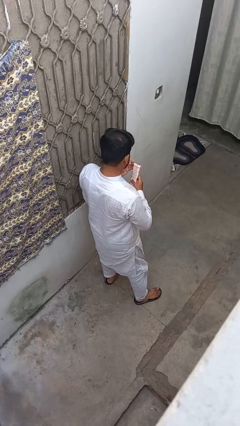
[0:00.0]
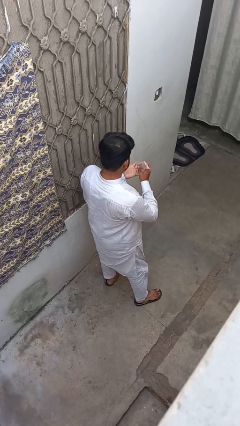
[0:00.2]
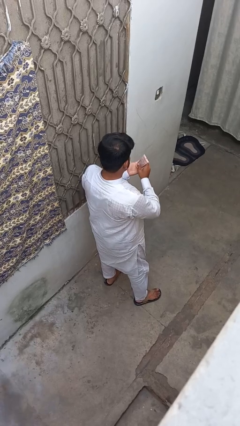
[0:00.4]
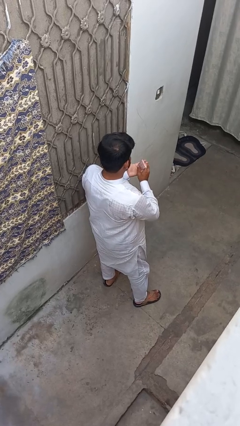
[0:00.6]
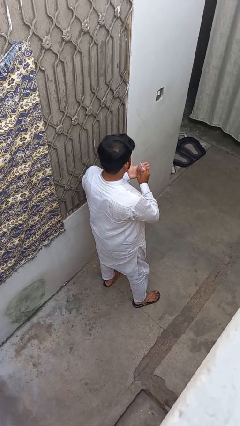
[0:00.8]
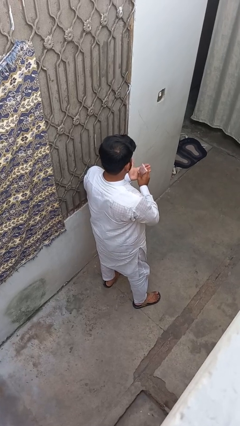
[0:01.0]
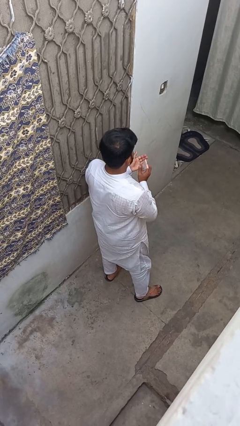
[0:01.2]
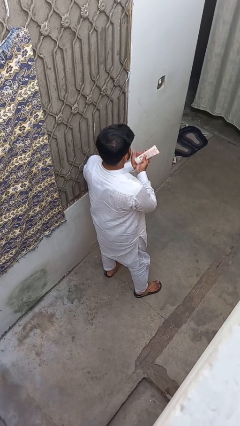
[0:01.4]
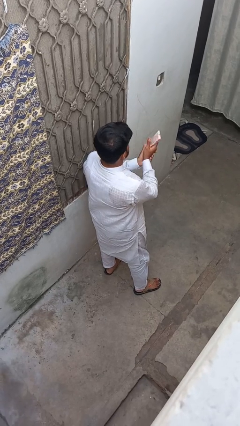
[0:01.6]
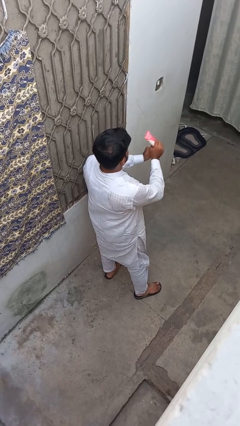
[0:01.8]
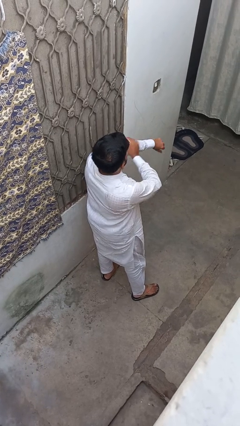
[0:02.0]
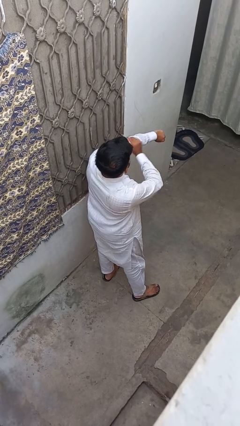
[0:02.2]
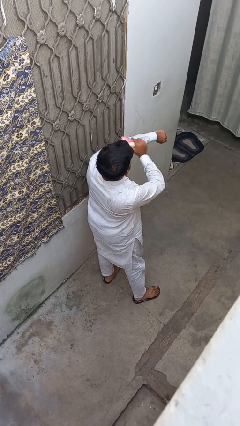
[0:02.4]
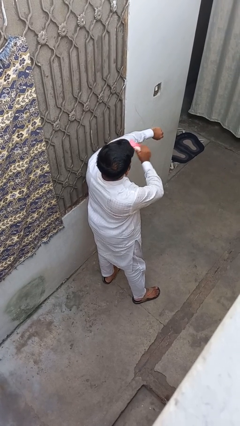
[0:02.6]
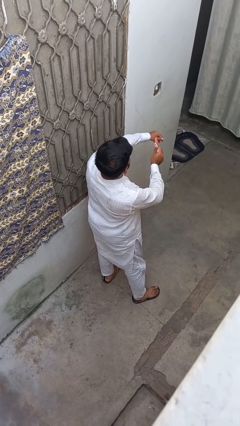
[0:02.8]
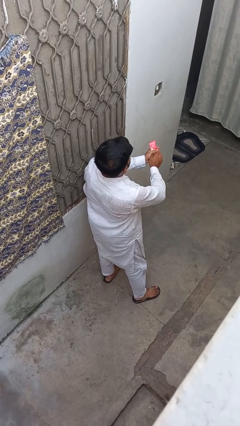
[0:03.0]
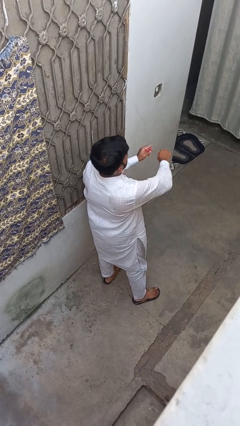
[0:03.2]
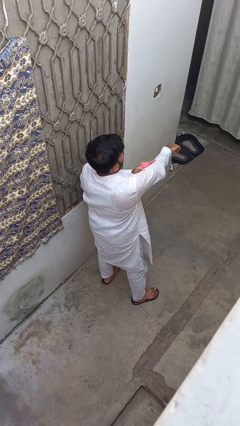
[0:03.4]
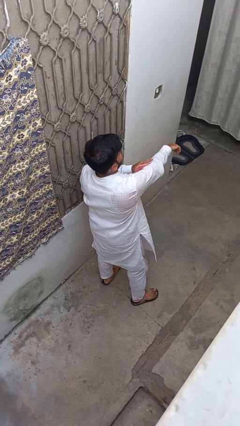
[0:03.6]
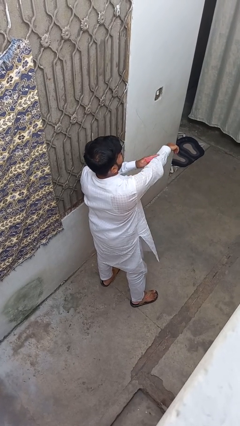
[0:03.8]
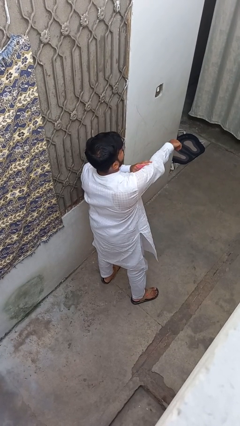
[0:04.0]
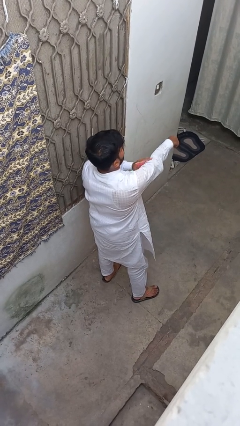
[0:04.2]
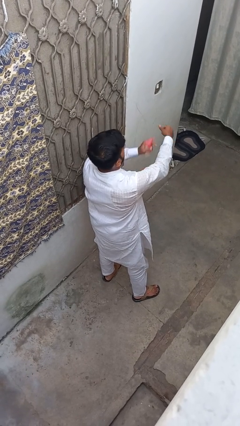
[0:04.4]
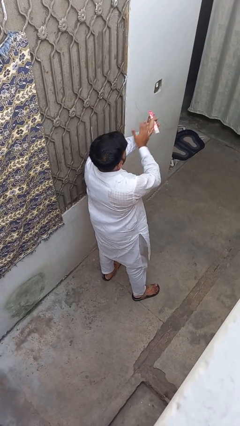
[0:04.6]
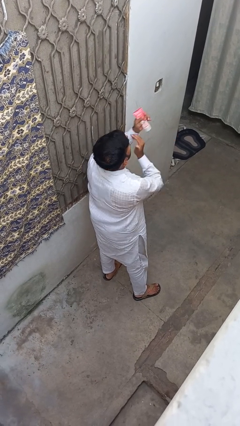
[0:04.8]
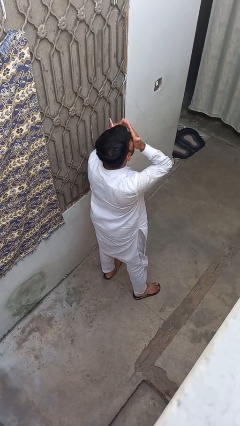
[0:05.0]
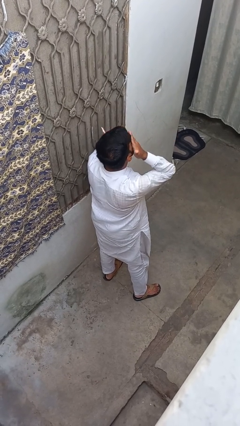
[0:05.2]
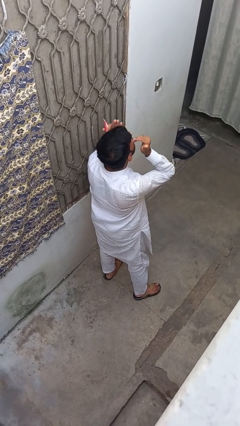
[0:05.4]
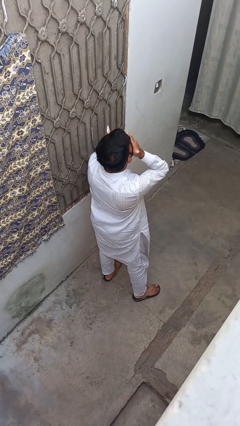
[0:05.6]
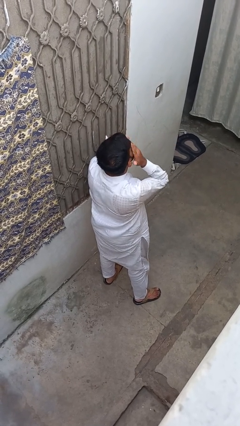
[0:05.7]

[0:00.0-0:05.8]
person applies sunscreen

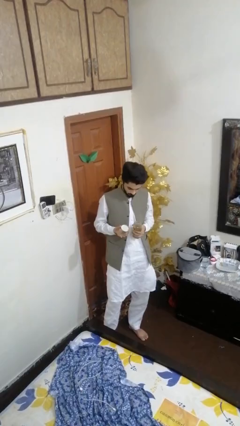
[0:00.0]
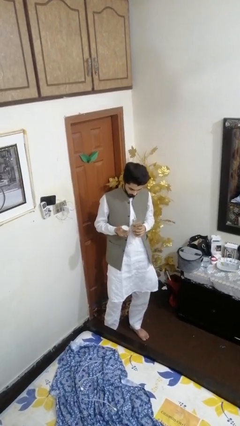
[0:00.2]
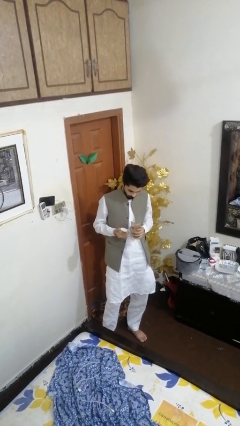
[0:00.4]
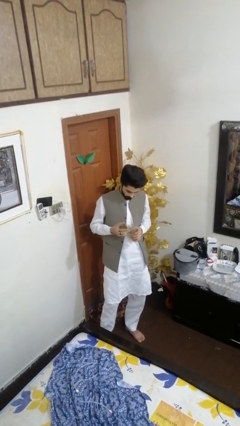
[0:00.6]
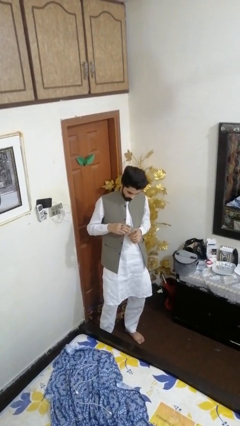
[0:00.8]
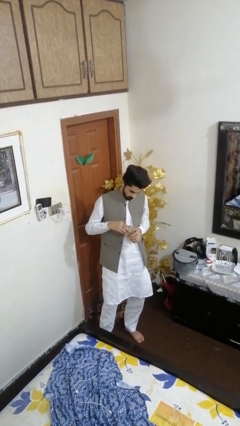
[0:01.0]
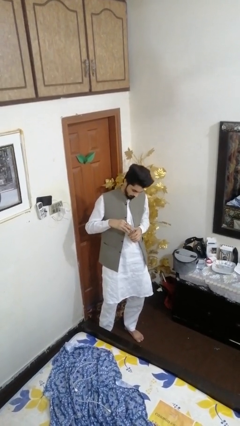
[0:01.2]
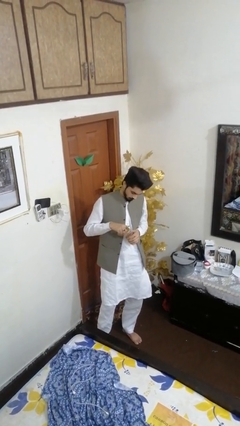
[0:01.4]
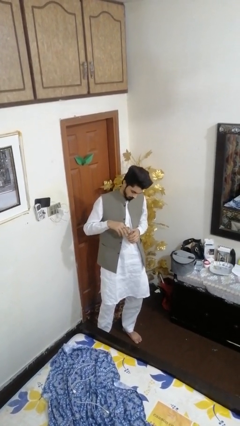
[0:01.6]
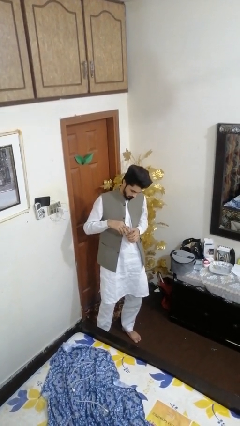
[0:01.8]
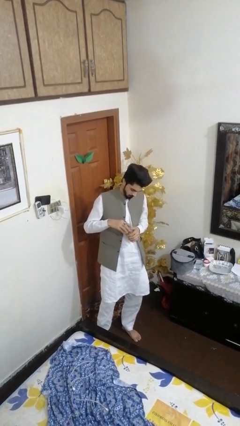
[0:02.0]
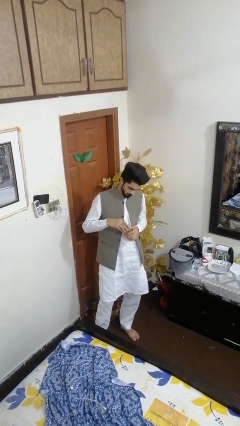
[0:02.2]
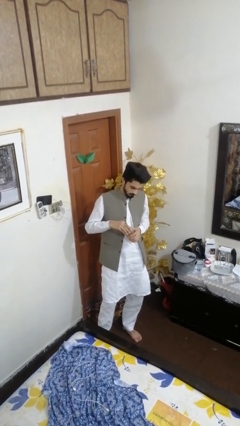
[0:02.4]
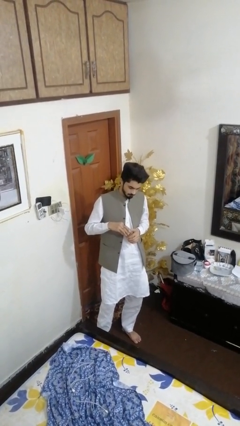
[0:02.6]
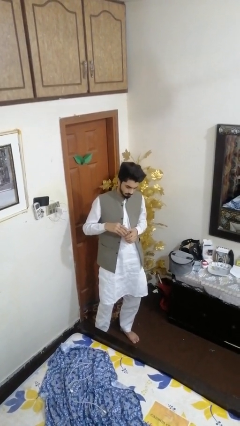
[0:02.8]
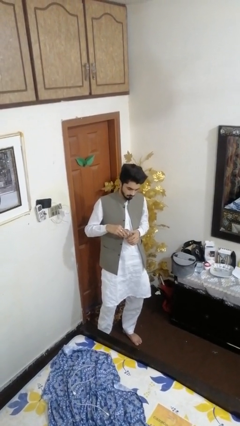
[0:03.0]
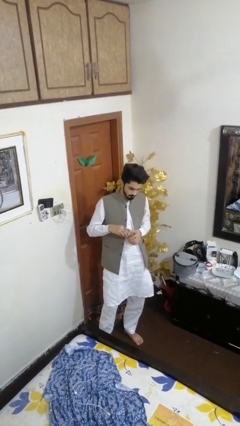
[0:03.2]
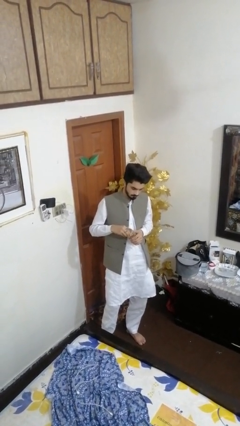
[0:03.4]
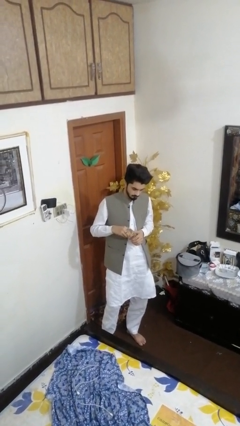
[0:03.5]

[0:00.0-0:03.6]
person closes jar

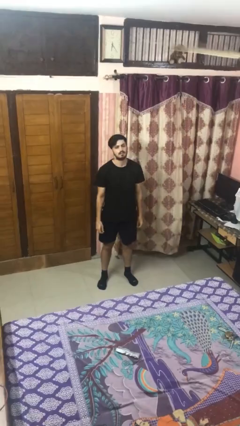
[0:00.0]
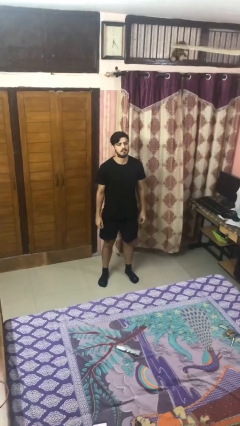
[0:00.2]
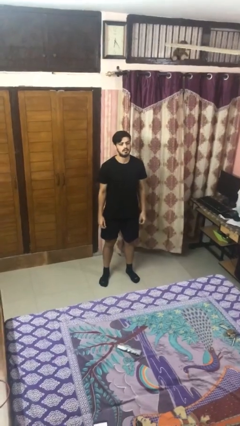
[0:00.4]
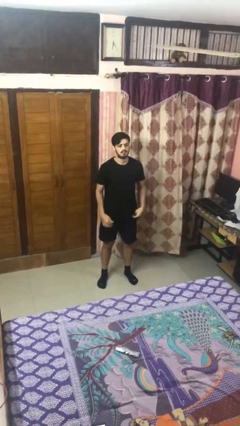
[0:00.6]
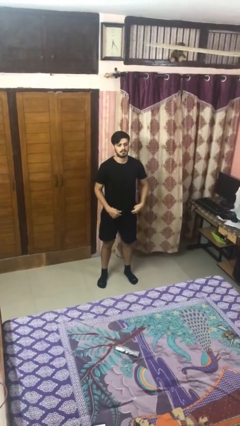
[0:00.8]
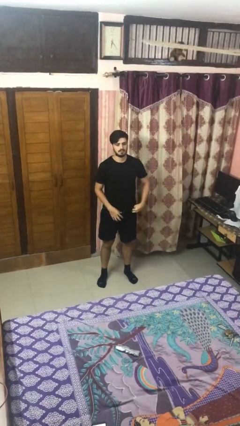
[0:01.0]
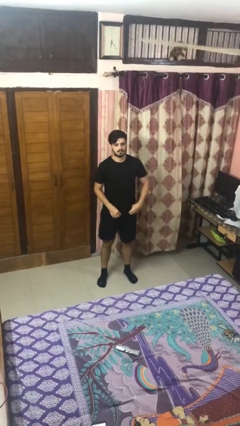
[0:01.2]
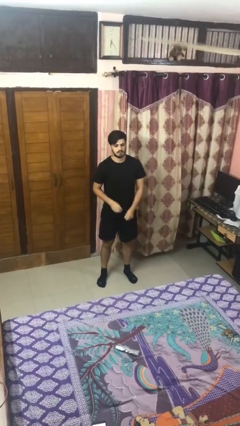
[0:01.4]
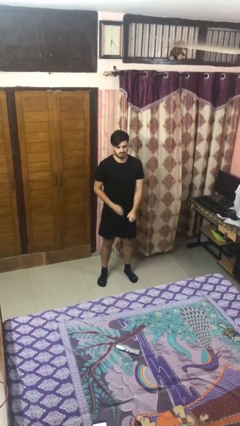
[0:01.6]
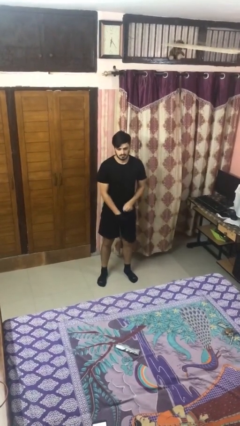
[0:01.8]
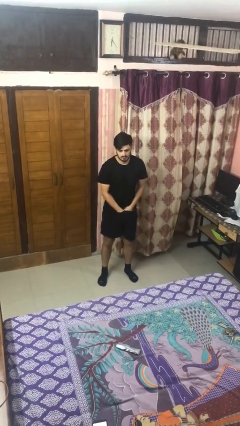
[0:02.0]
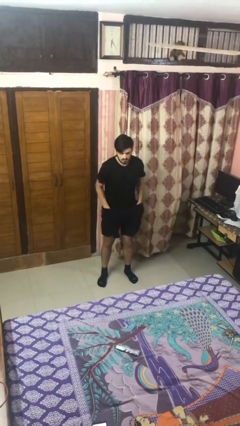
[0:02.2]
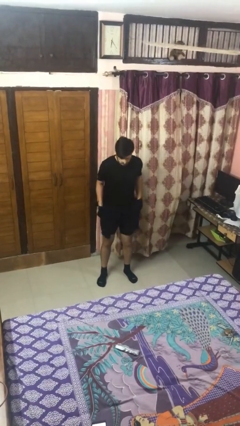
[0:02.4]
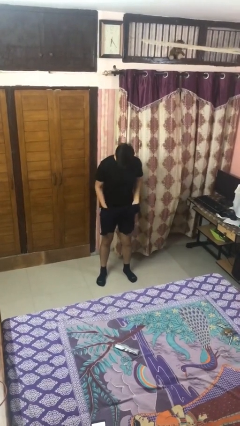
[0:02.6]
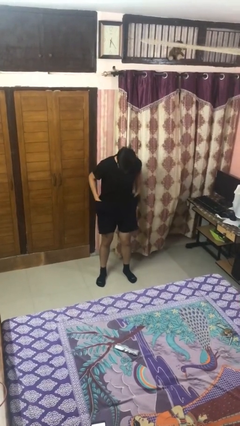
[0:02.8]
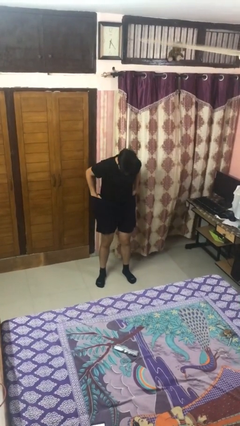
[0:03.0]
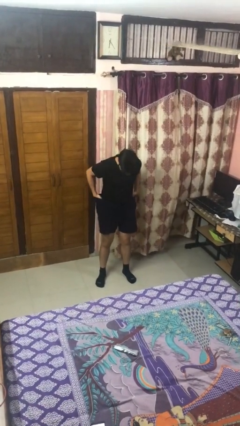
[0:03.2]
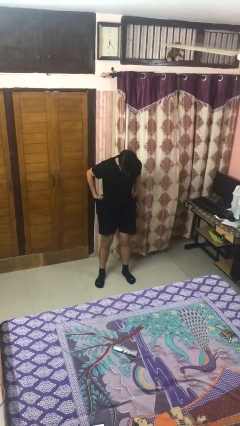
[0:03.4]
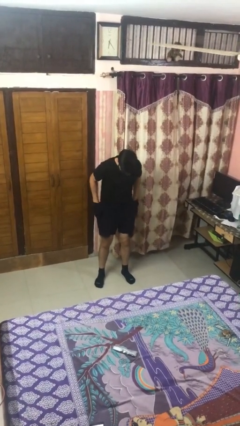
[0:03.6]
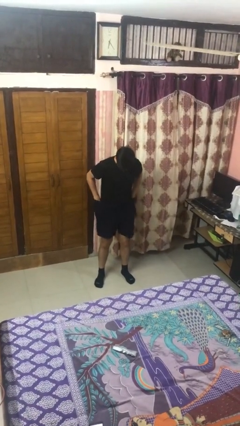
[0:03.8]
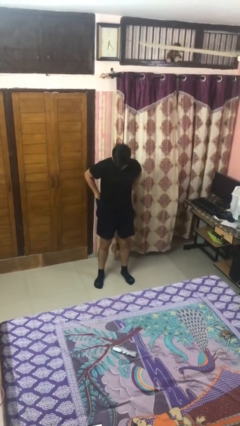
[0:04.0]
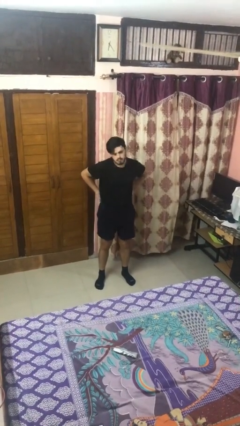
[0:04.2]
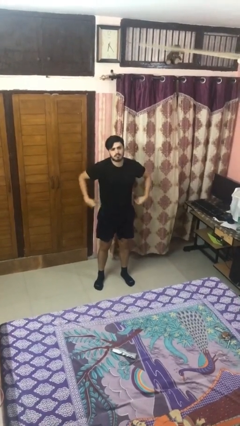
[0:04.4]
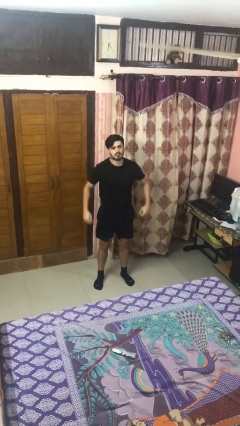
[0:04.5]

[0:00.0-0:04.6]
person tucks in shirt

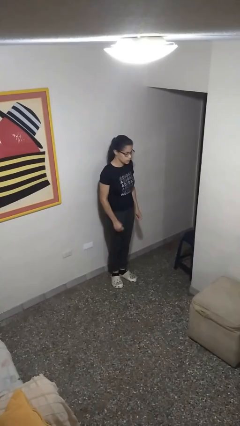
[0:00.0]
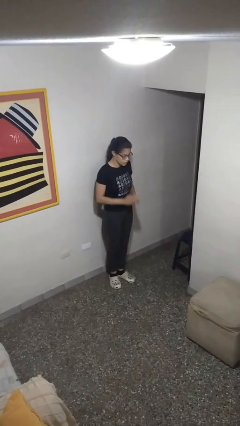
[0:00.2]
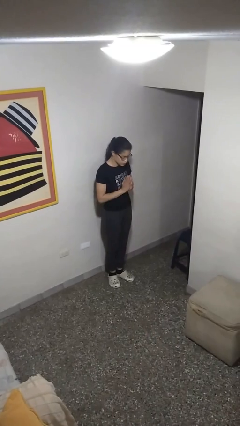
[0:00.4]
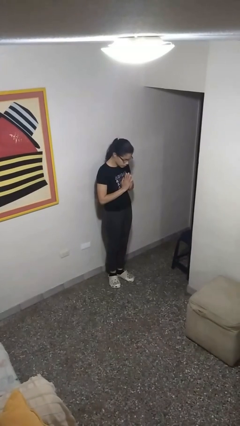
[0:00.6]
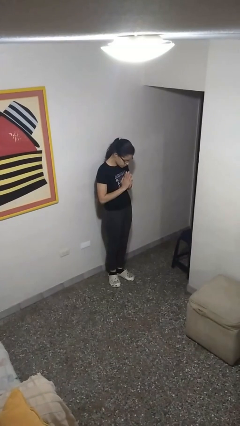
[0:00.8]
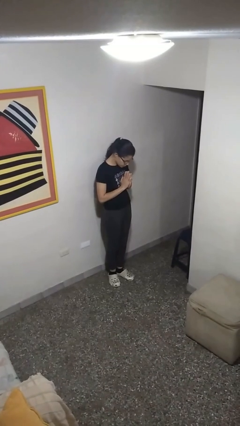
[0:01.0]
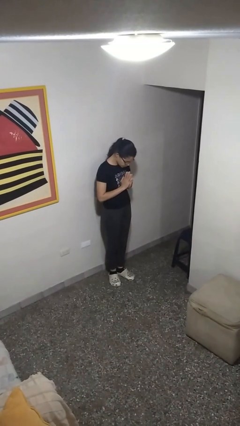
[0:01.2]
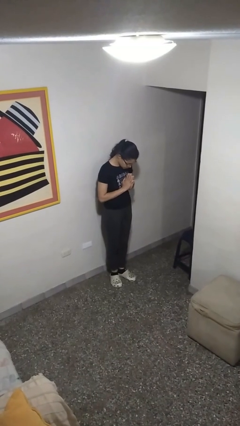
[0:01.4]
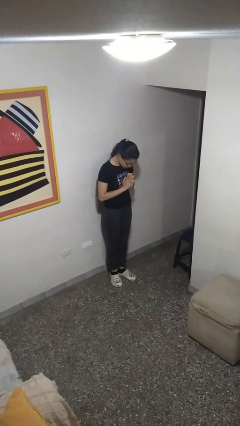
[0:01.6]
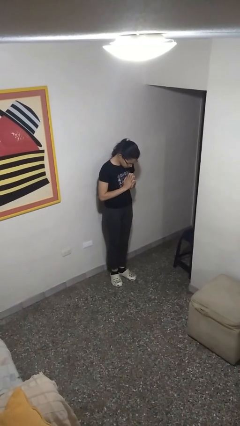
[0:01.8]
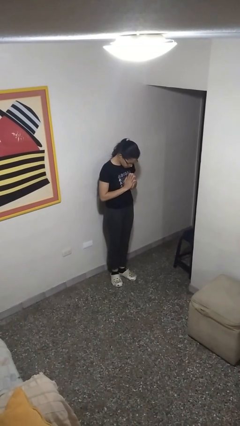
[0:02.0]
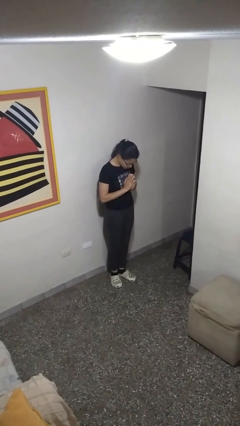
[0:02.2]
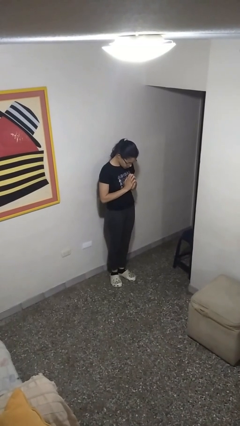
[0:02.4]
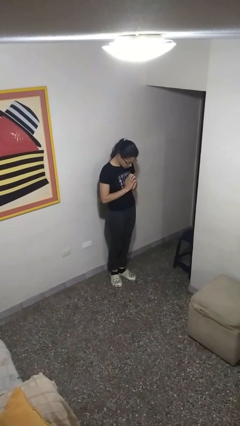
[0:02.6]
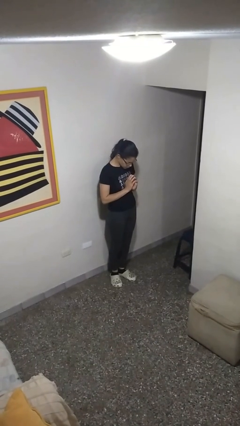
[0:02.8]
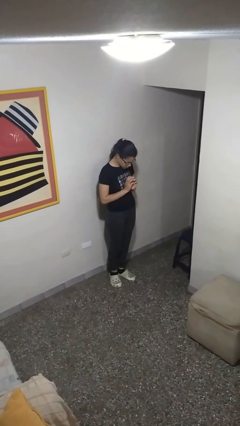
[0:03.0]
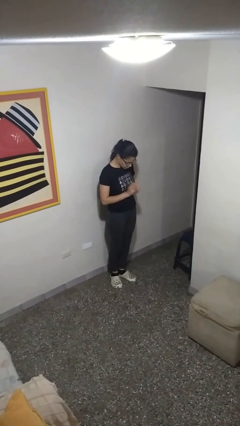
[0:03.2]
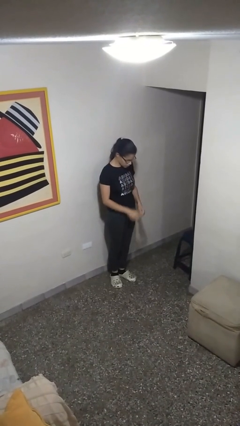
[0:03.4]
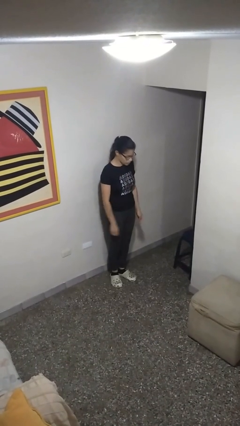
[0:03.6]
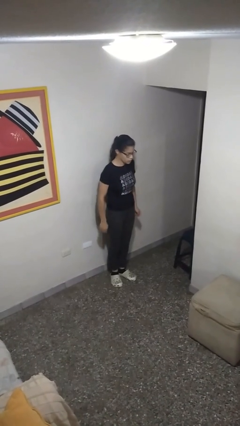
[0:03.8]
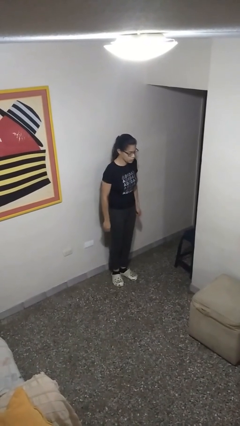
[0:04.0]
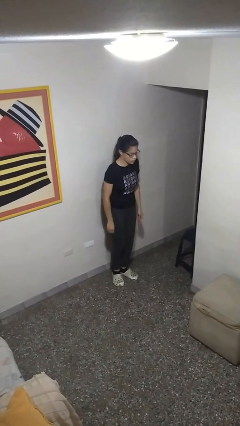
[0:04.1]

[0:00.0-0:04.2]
person prays
